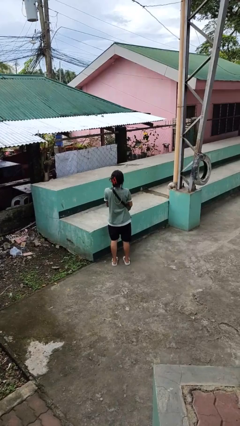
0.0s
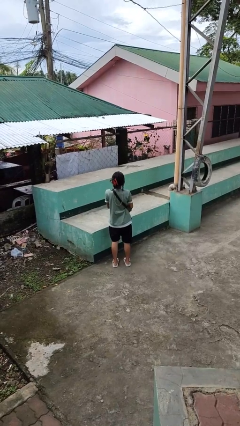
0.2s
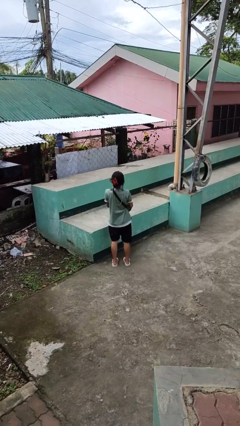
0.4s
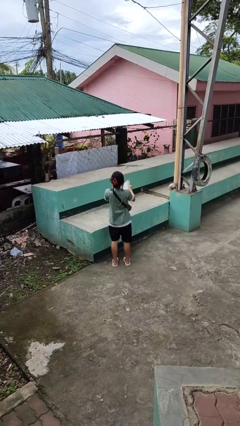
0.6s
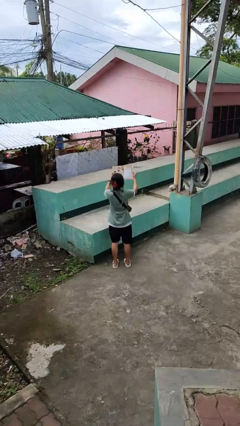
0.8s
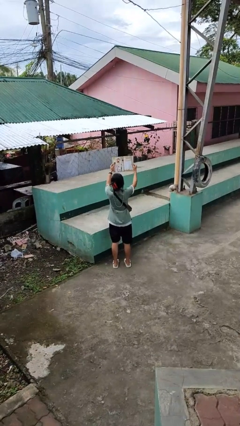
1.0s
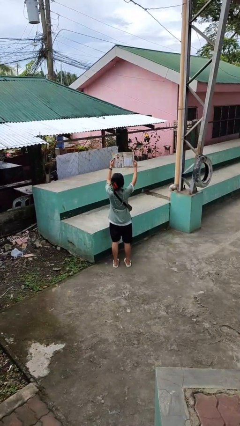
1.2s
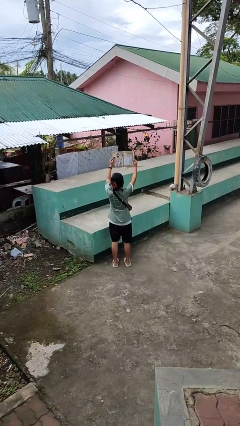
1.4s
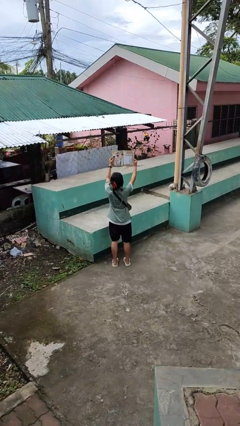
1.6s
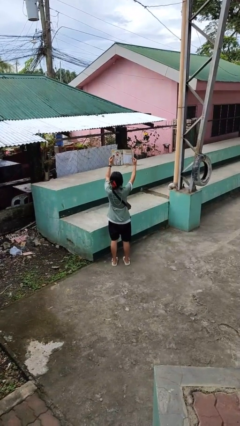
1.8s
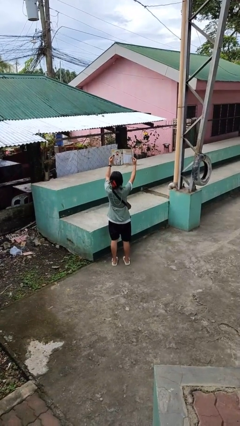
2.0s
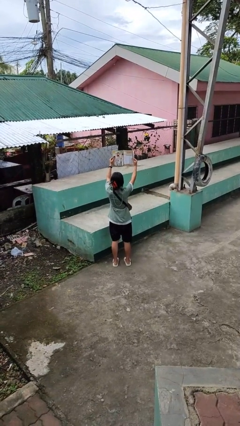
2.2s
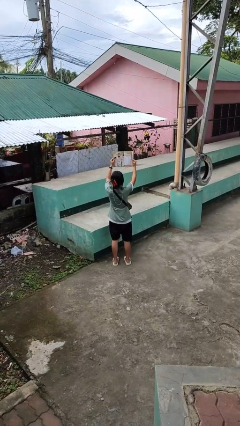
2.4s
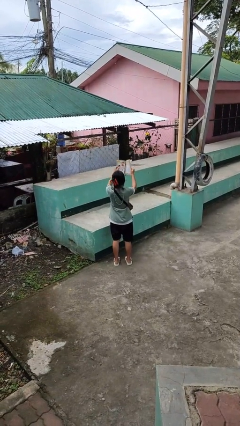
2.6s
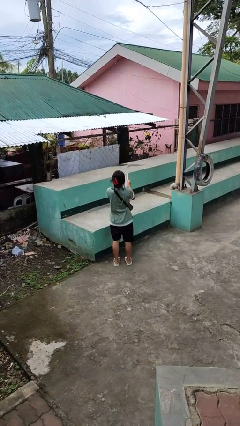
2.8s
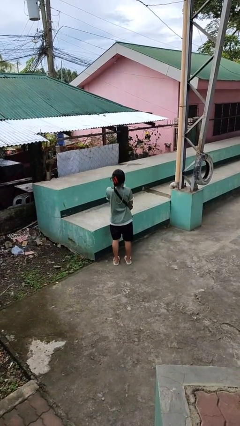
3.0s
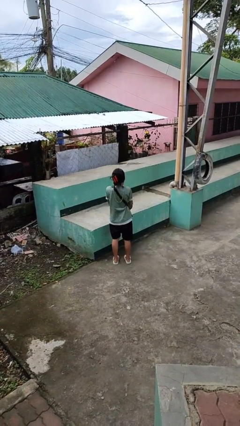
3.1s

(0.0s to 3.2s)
person reads magazine

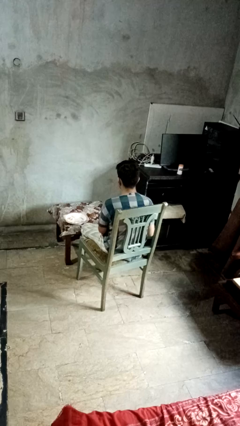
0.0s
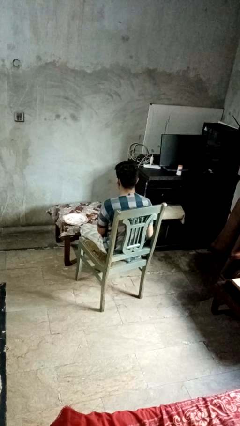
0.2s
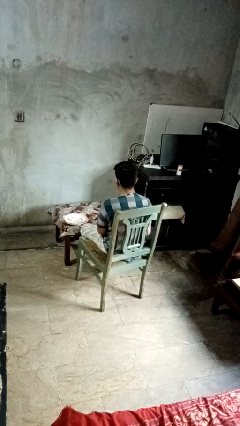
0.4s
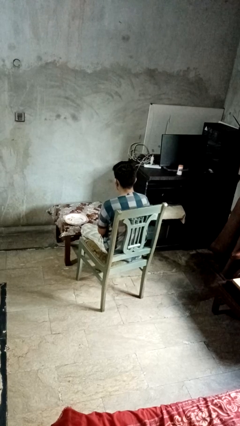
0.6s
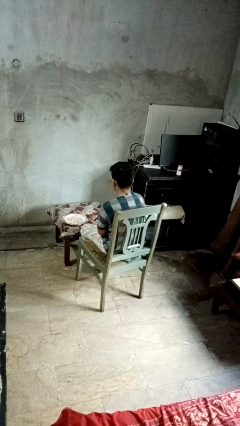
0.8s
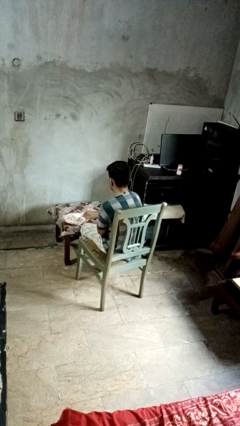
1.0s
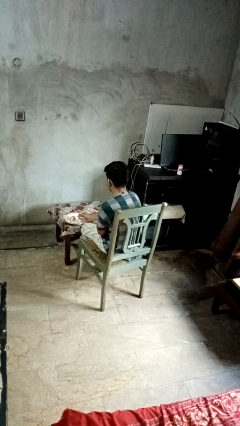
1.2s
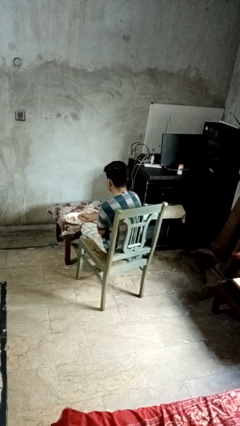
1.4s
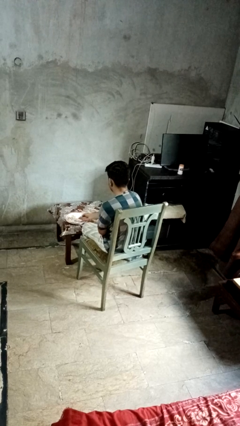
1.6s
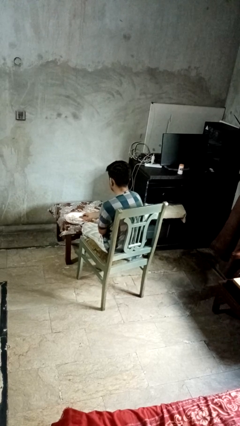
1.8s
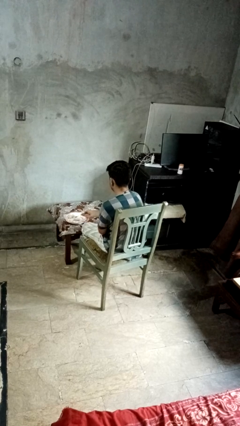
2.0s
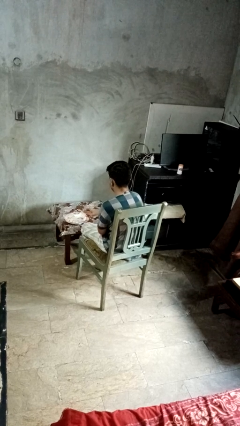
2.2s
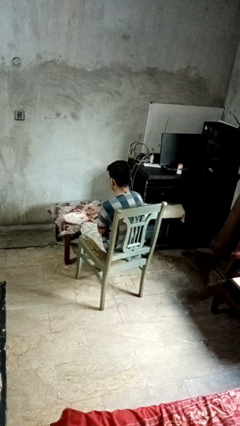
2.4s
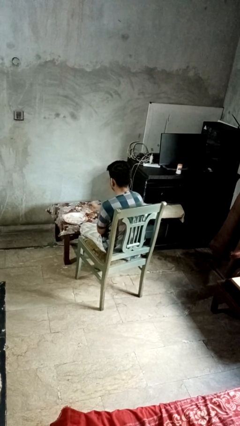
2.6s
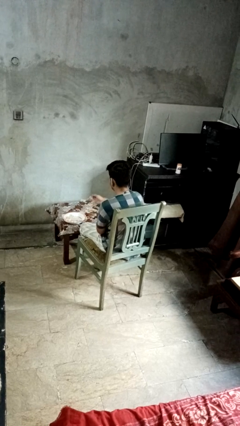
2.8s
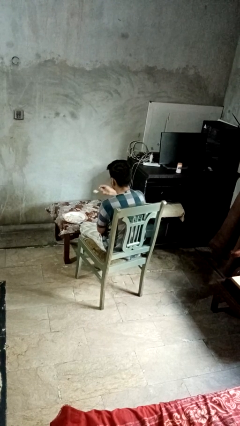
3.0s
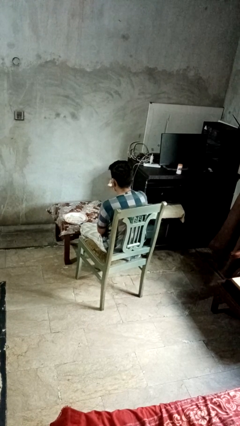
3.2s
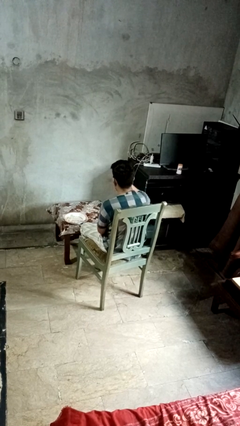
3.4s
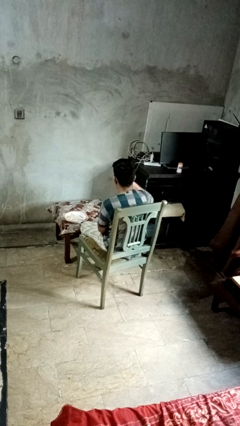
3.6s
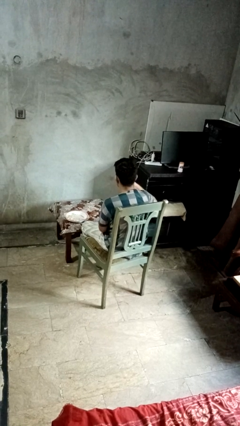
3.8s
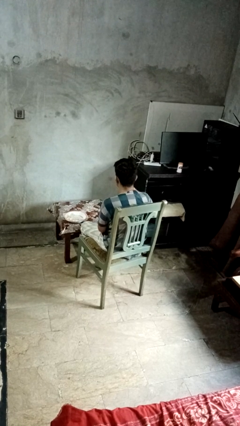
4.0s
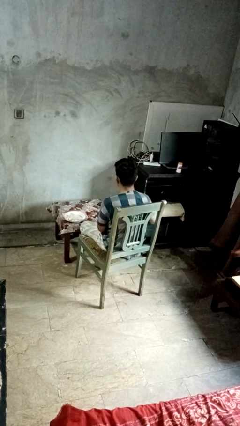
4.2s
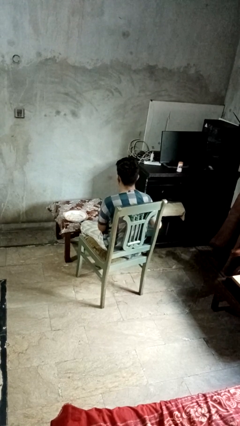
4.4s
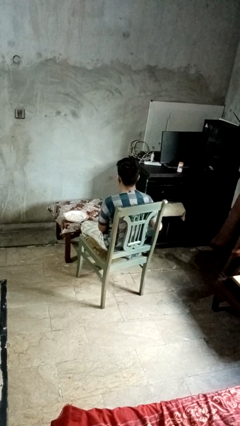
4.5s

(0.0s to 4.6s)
person eats with utensil

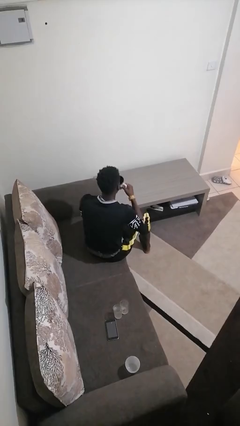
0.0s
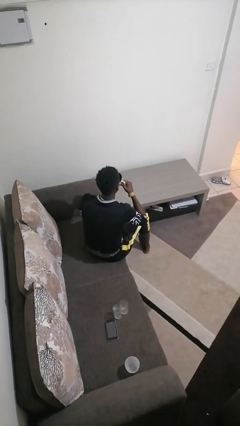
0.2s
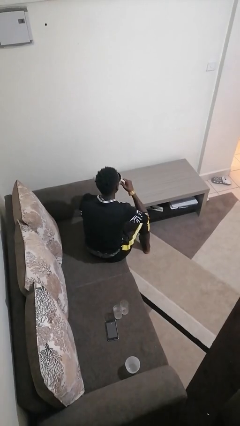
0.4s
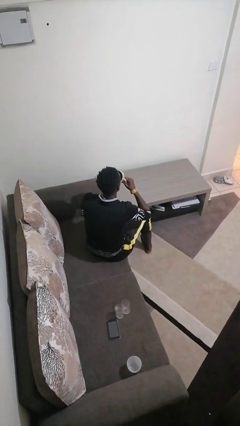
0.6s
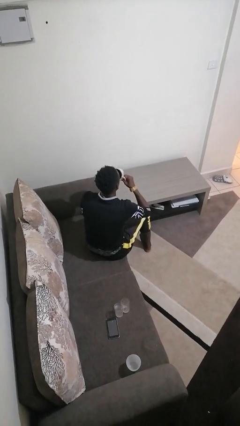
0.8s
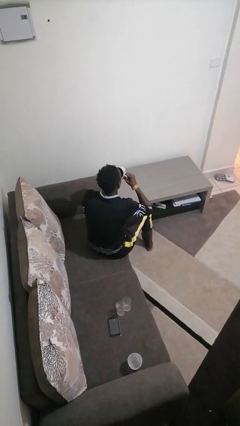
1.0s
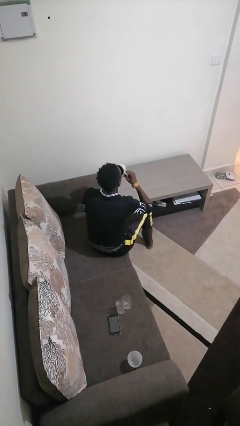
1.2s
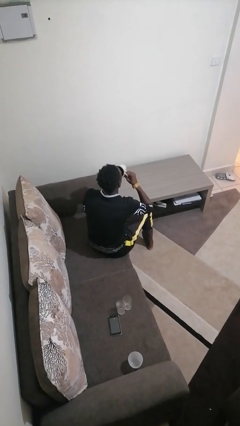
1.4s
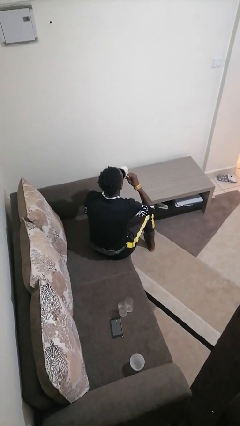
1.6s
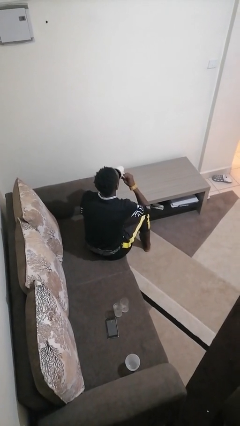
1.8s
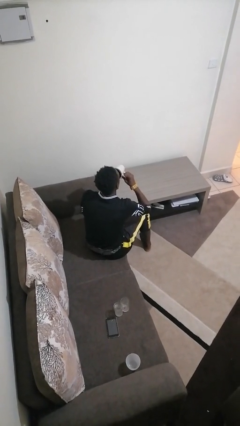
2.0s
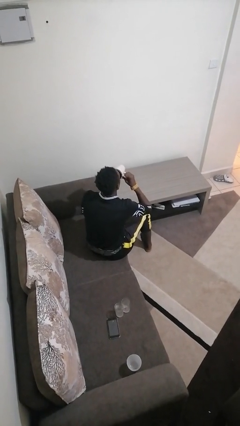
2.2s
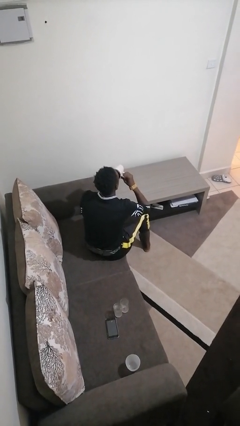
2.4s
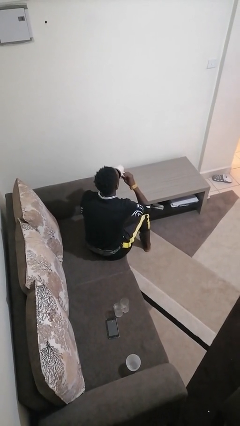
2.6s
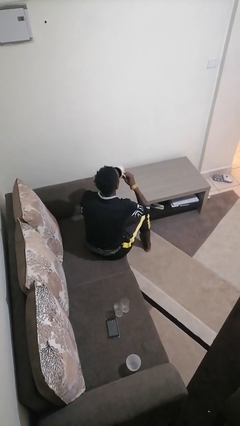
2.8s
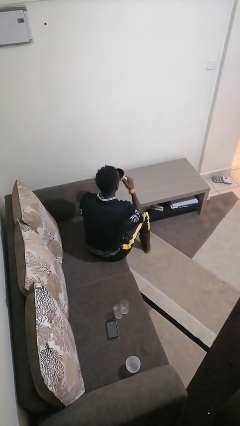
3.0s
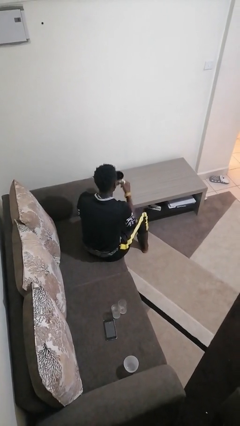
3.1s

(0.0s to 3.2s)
person drinks from mug

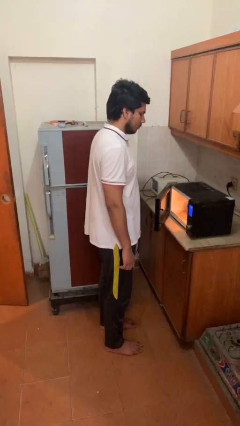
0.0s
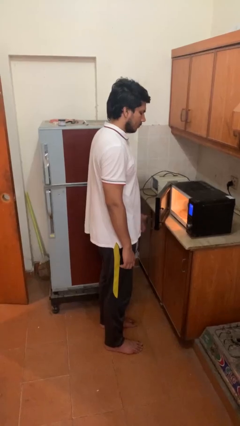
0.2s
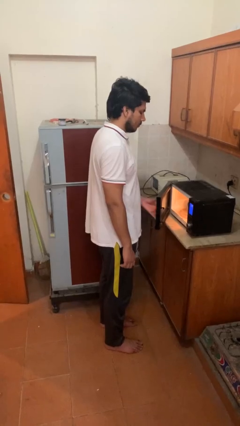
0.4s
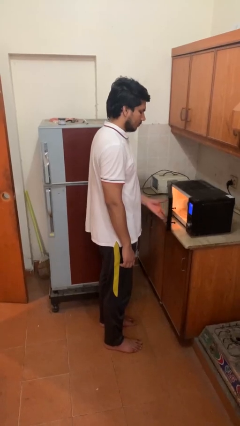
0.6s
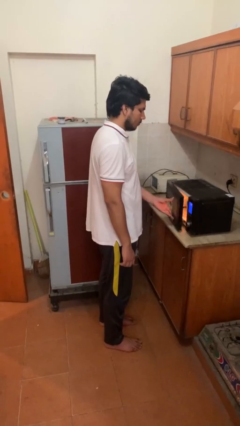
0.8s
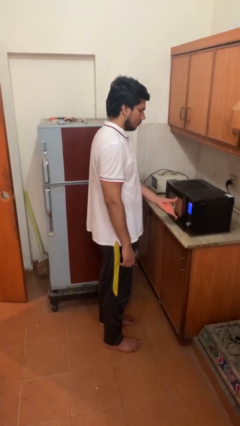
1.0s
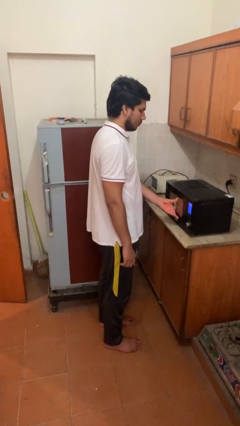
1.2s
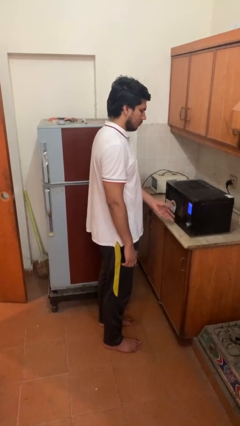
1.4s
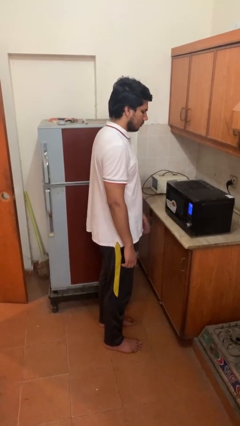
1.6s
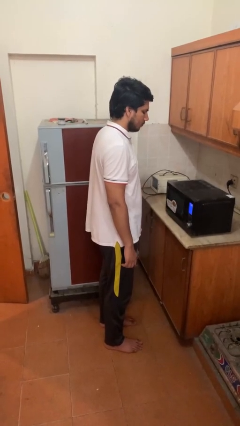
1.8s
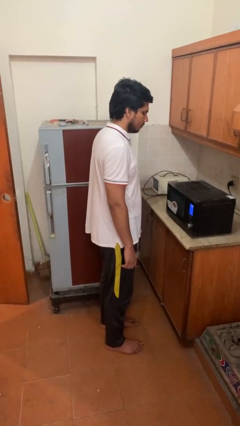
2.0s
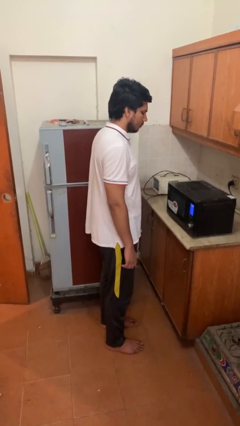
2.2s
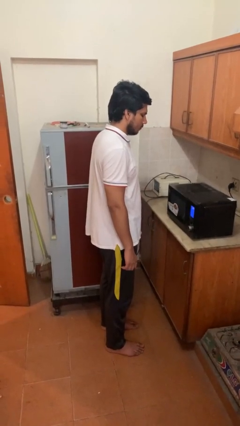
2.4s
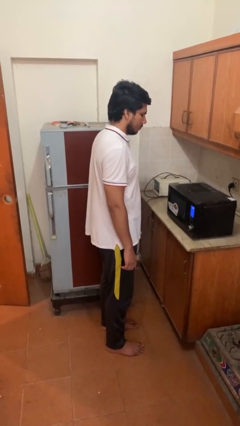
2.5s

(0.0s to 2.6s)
person closes microwave

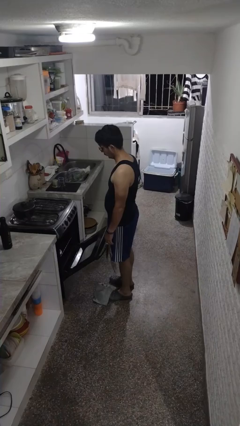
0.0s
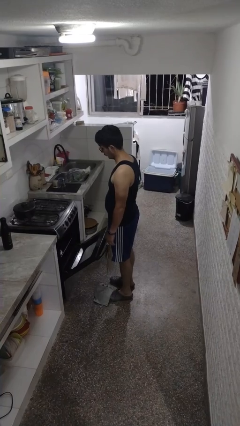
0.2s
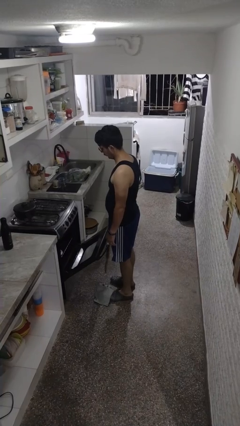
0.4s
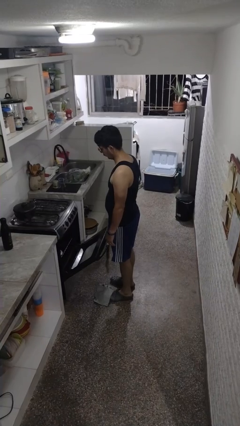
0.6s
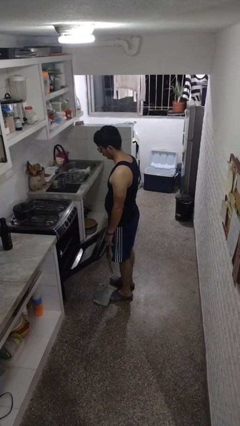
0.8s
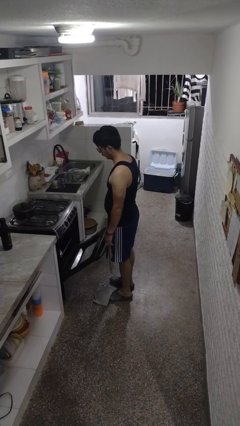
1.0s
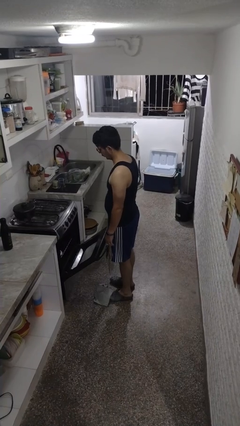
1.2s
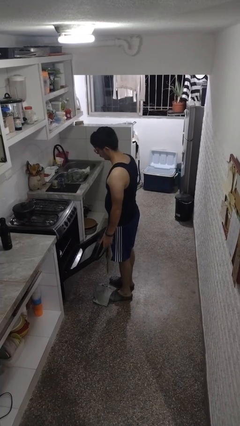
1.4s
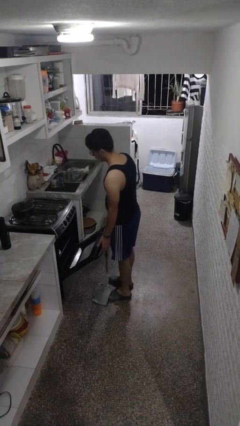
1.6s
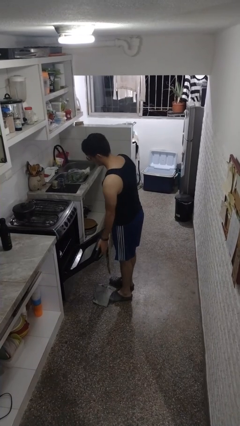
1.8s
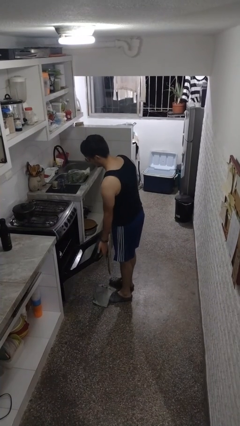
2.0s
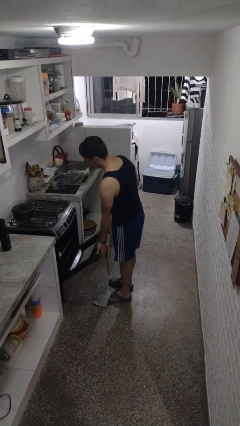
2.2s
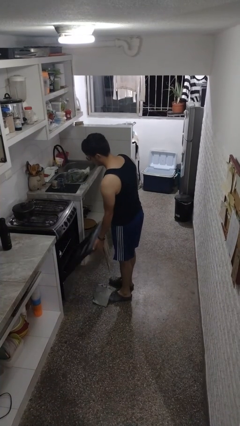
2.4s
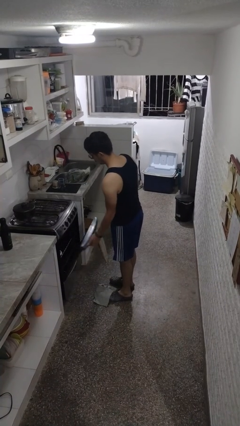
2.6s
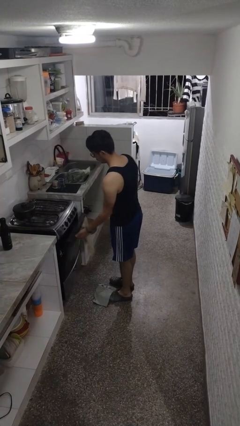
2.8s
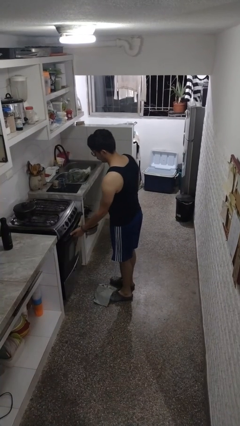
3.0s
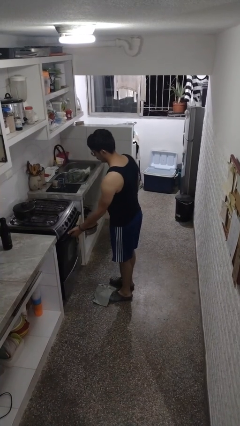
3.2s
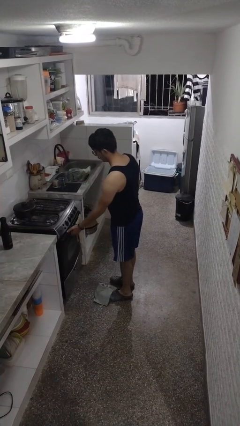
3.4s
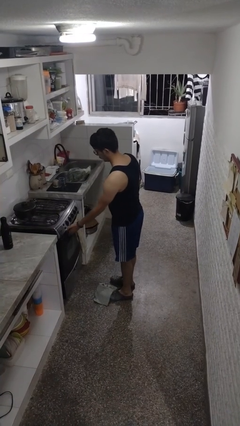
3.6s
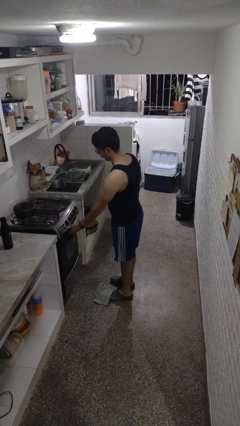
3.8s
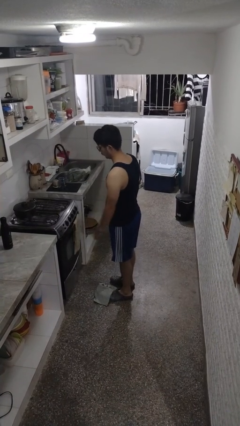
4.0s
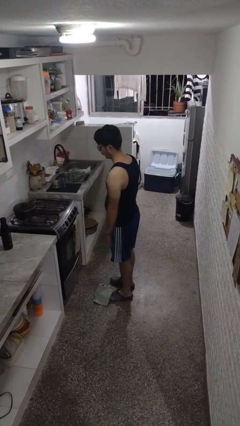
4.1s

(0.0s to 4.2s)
person closes oven door

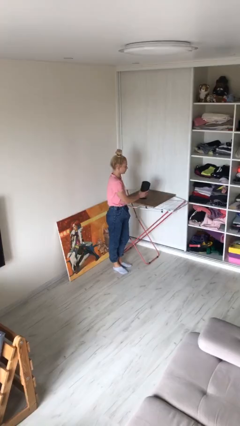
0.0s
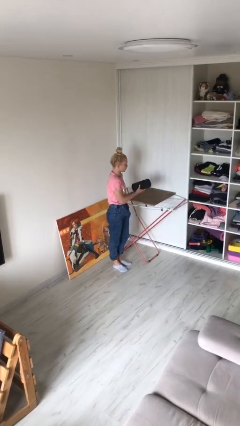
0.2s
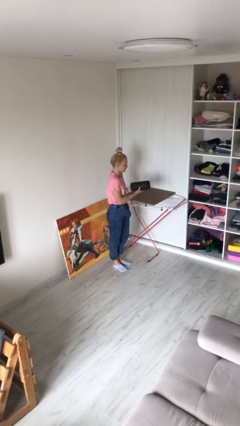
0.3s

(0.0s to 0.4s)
person picks up object from table
